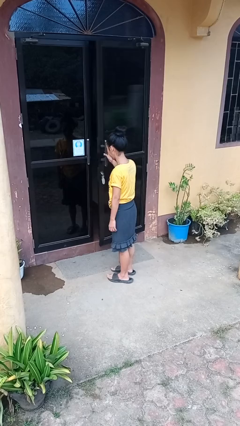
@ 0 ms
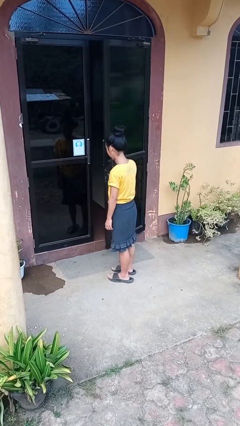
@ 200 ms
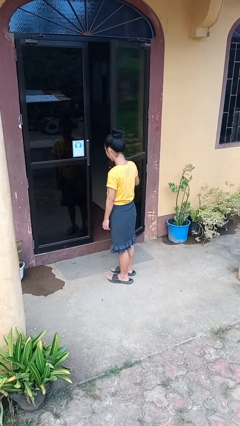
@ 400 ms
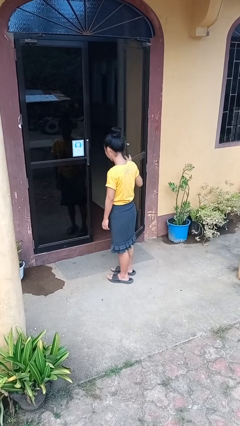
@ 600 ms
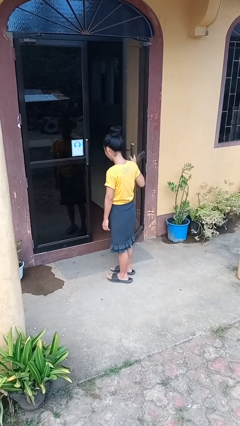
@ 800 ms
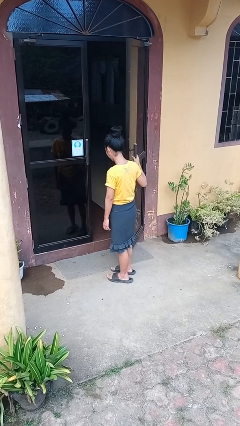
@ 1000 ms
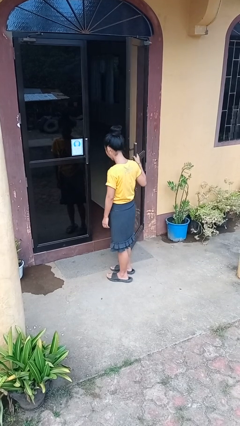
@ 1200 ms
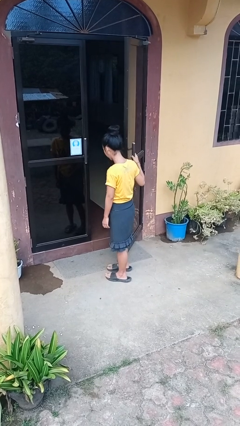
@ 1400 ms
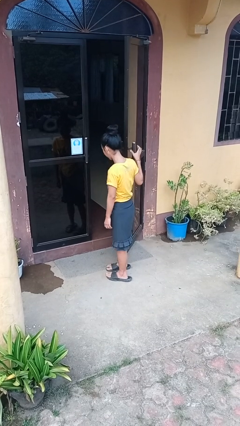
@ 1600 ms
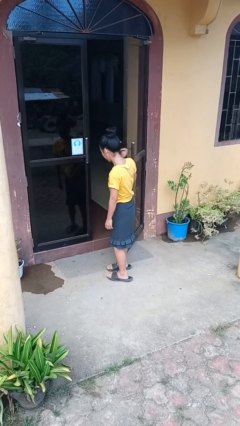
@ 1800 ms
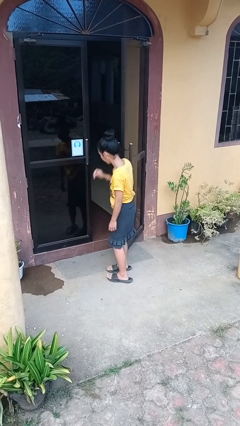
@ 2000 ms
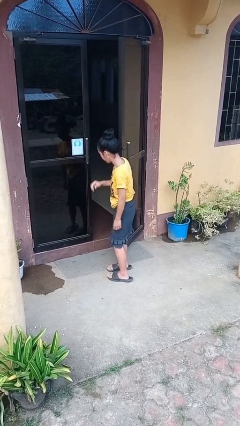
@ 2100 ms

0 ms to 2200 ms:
person opens facility door

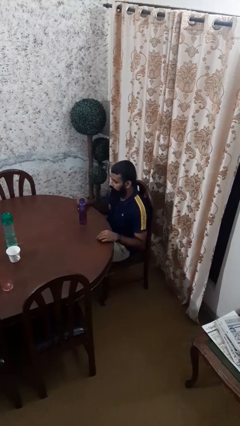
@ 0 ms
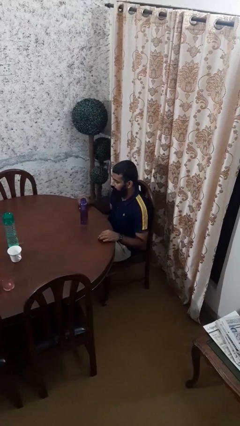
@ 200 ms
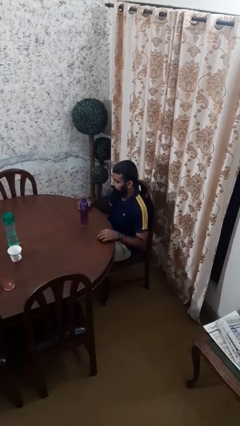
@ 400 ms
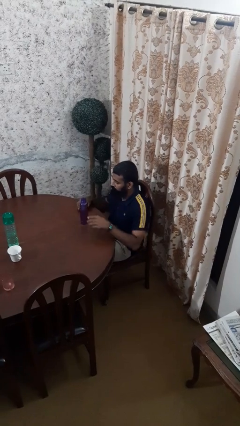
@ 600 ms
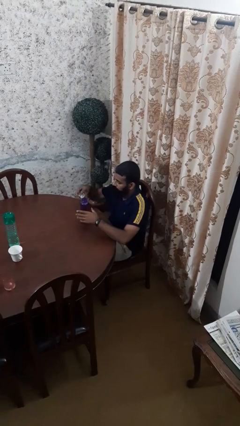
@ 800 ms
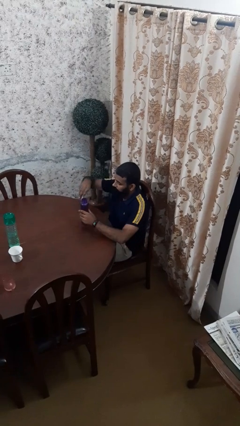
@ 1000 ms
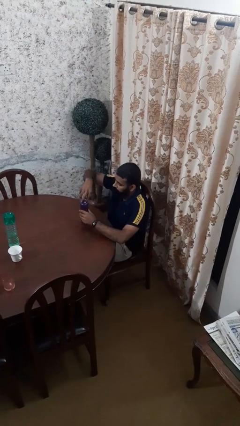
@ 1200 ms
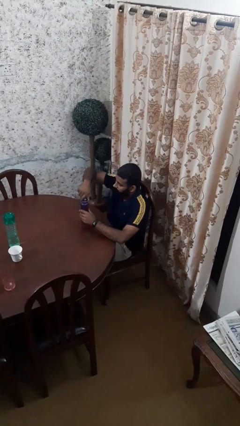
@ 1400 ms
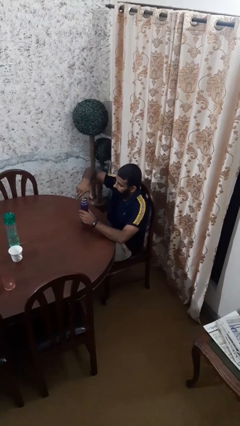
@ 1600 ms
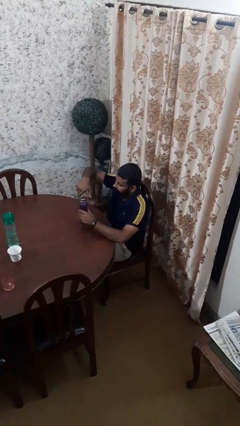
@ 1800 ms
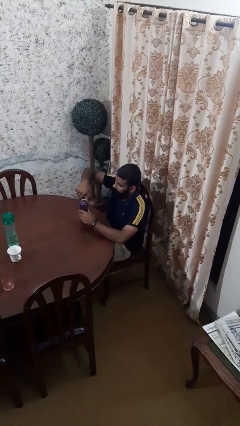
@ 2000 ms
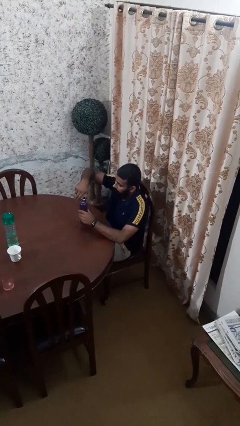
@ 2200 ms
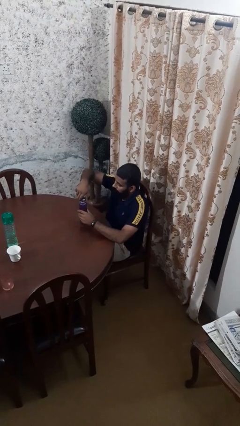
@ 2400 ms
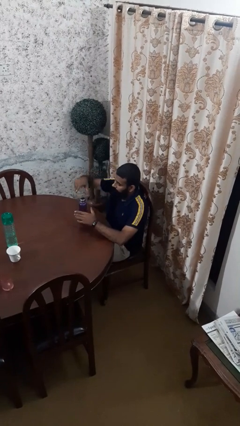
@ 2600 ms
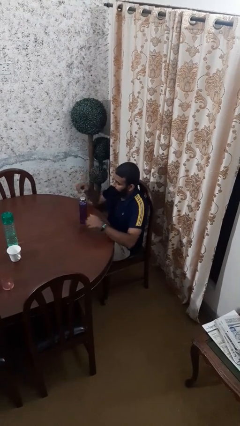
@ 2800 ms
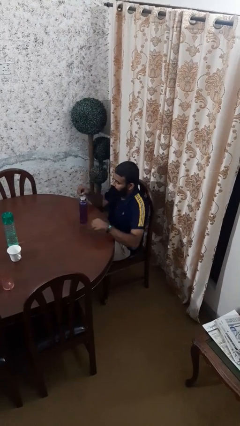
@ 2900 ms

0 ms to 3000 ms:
person screws lid to bottle

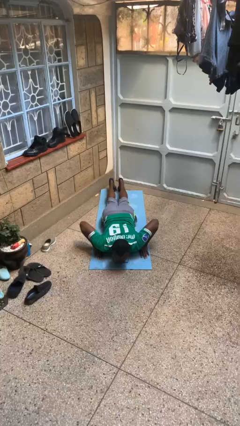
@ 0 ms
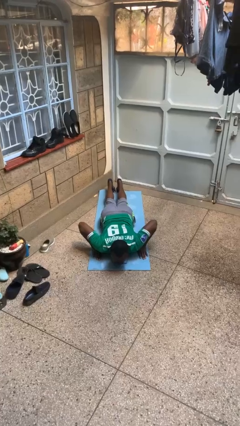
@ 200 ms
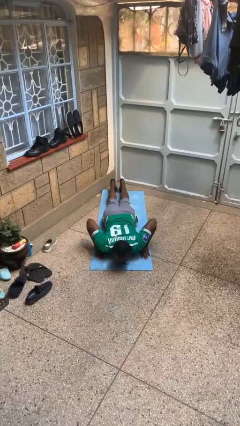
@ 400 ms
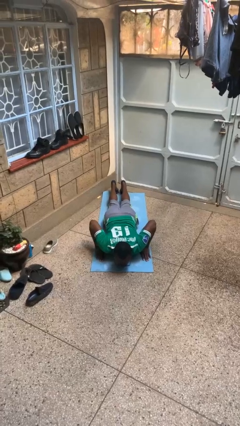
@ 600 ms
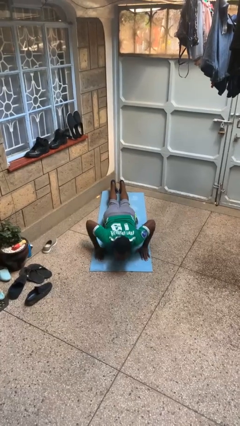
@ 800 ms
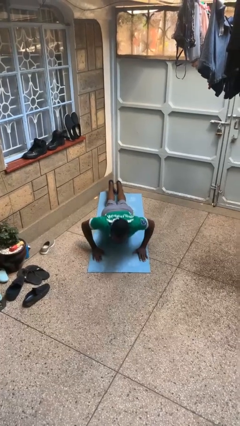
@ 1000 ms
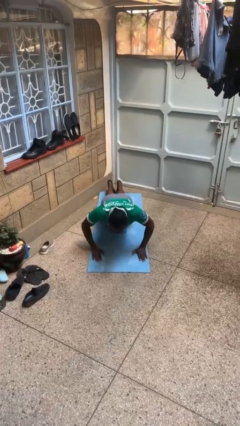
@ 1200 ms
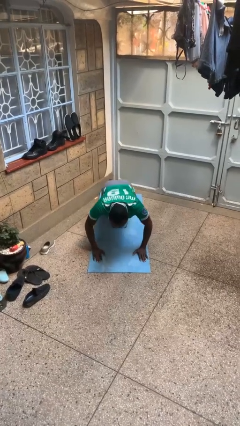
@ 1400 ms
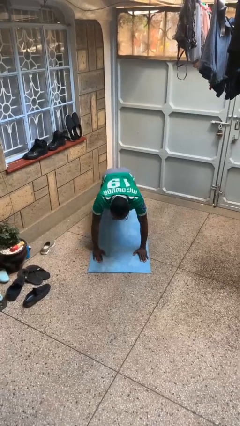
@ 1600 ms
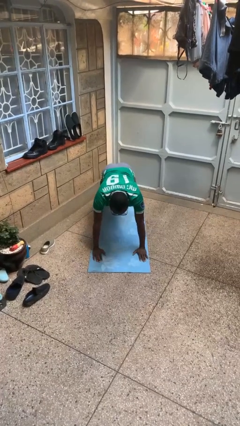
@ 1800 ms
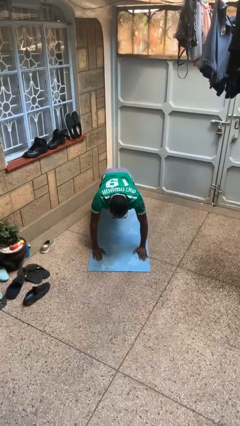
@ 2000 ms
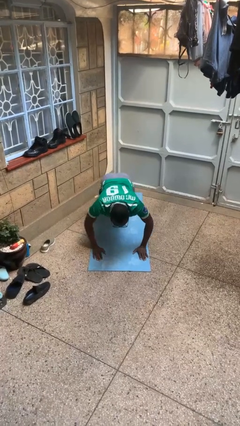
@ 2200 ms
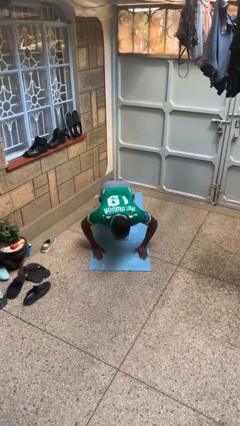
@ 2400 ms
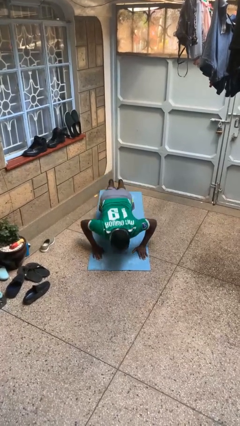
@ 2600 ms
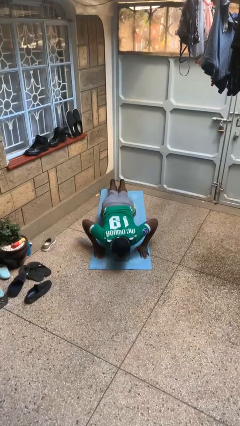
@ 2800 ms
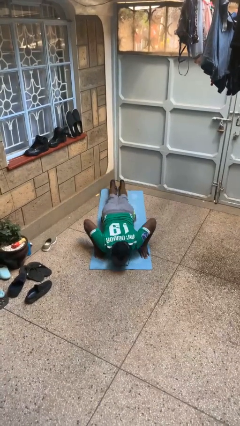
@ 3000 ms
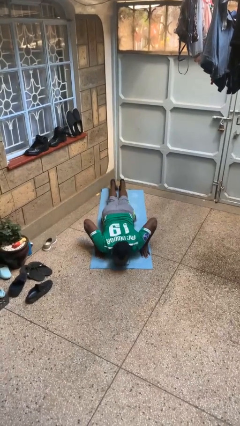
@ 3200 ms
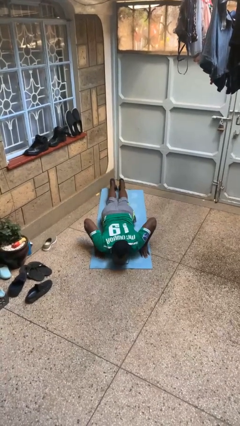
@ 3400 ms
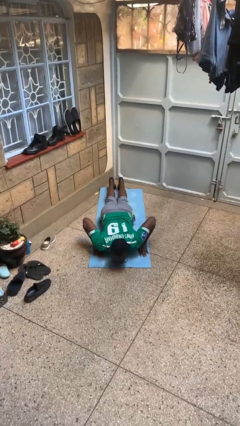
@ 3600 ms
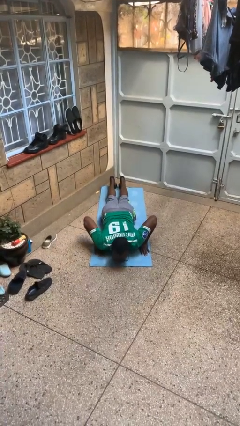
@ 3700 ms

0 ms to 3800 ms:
person exercises with pushup

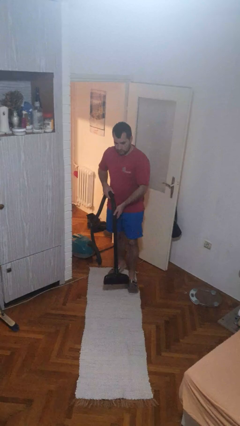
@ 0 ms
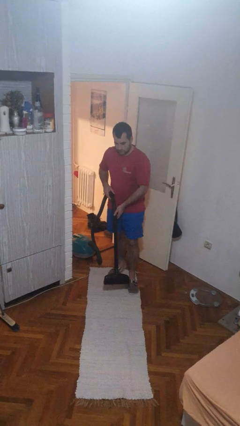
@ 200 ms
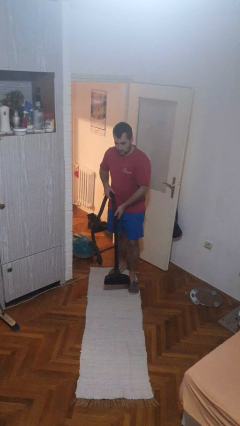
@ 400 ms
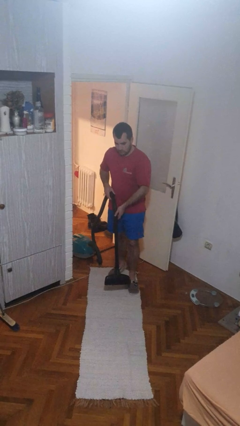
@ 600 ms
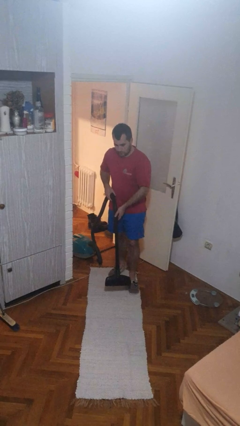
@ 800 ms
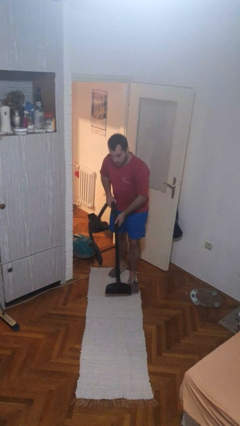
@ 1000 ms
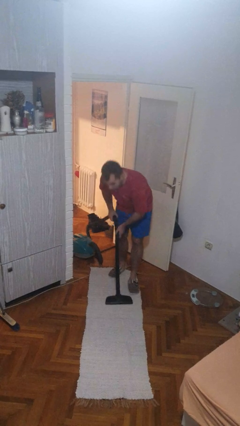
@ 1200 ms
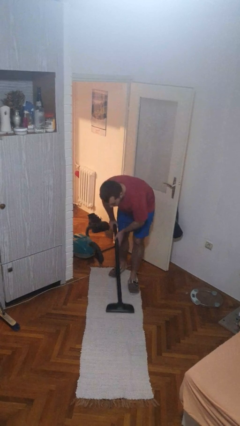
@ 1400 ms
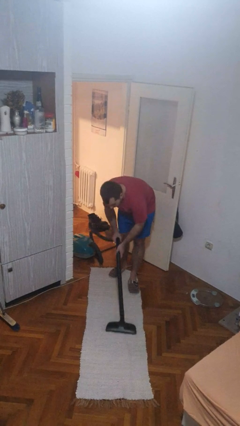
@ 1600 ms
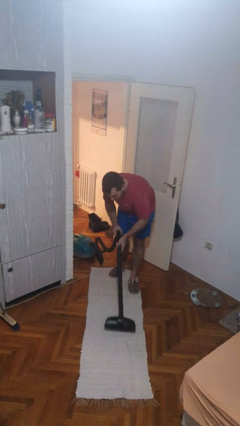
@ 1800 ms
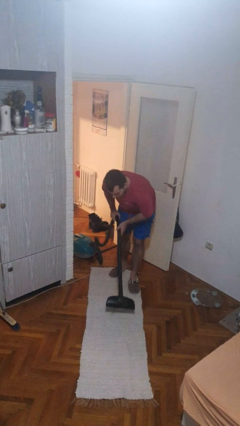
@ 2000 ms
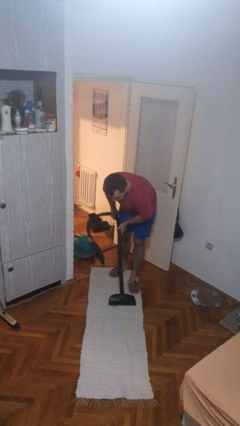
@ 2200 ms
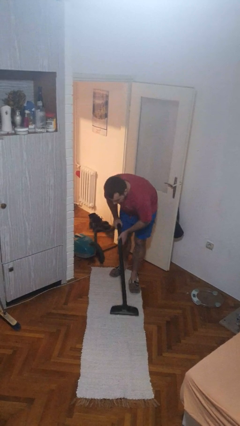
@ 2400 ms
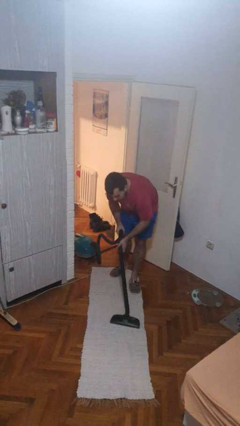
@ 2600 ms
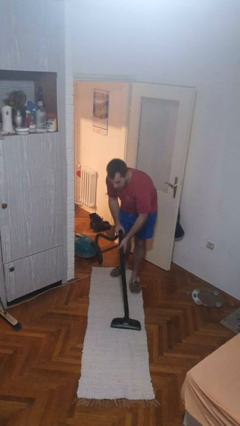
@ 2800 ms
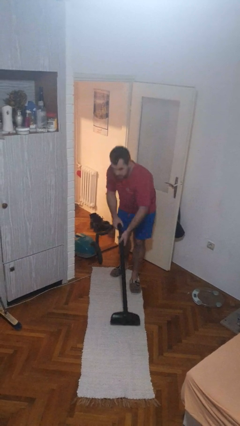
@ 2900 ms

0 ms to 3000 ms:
person vacuums carpet

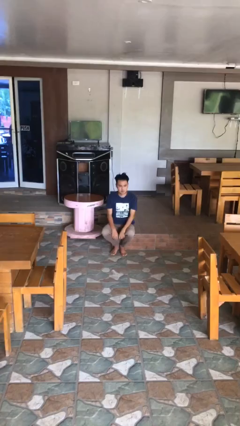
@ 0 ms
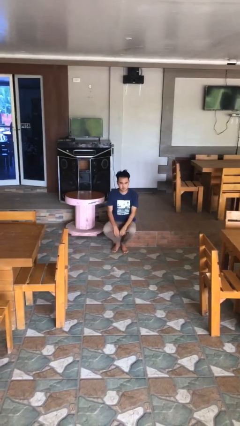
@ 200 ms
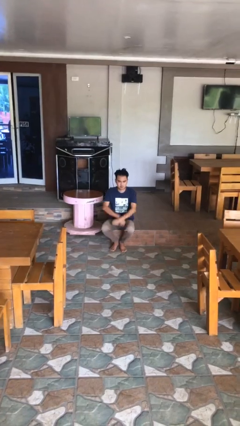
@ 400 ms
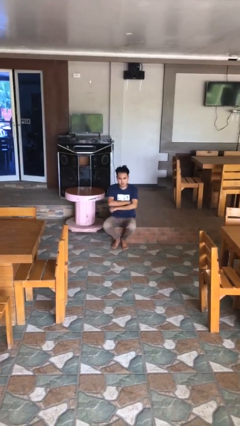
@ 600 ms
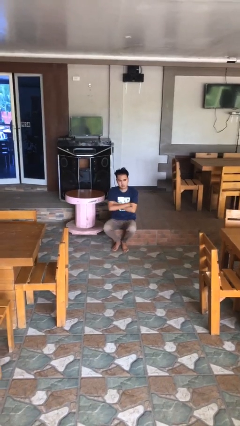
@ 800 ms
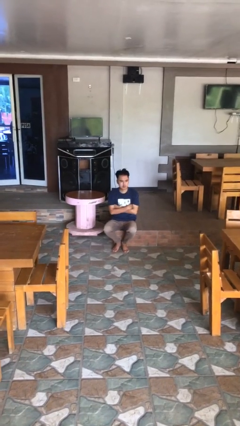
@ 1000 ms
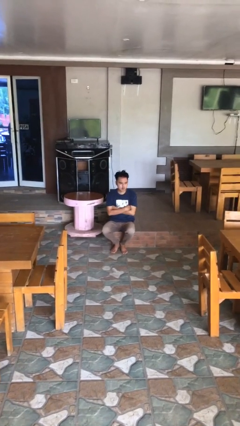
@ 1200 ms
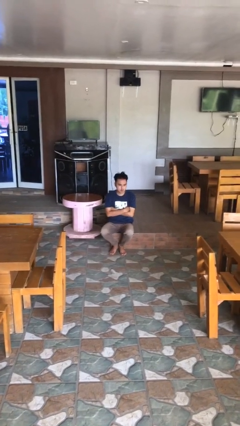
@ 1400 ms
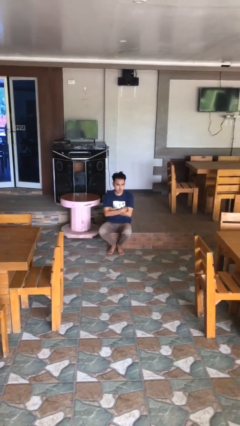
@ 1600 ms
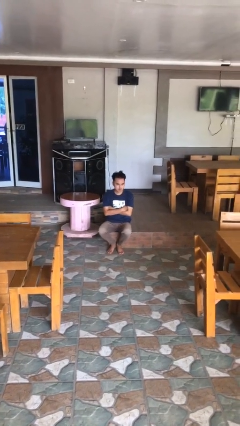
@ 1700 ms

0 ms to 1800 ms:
person crosses arms

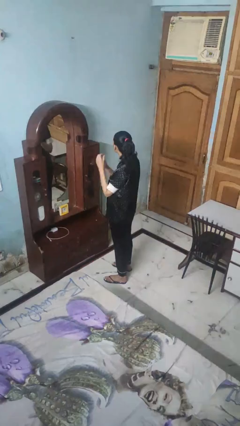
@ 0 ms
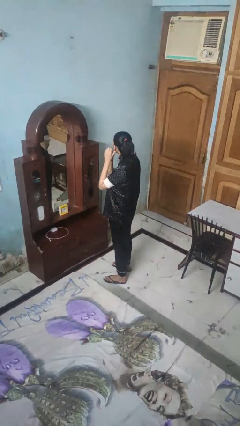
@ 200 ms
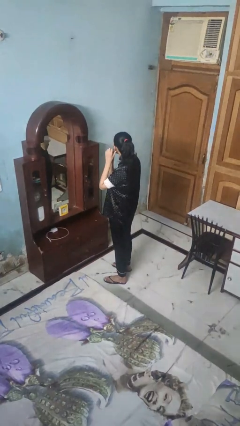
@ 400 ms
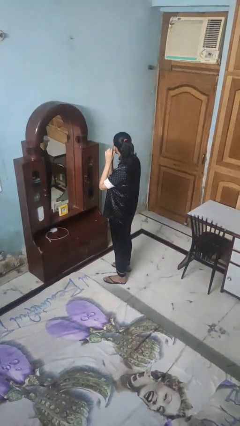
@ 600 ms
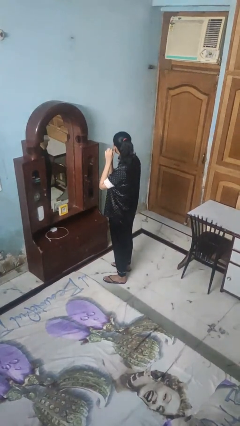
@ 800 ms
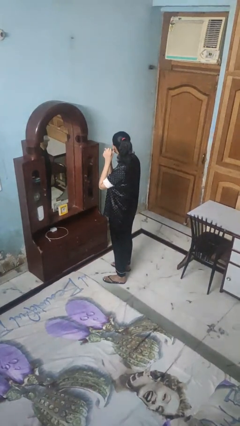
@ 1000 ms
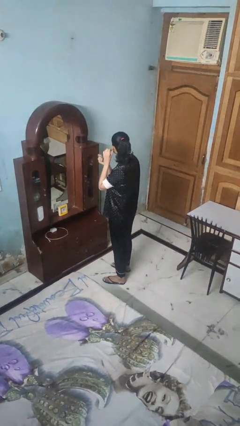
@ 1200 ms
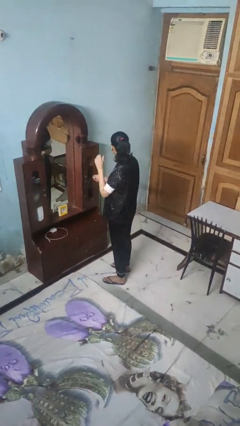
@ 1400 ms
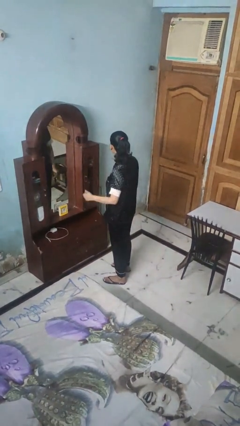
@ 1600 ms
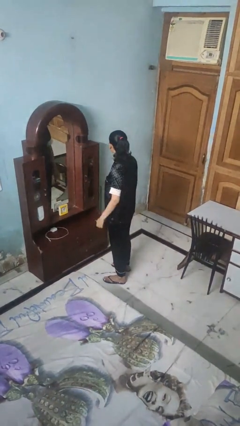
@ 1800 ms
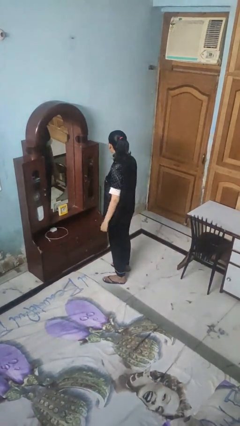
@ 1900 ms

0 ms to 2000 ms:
person takes off earrings

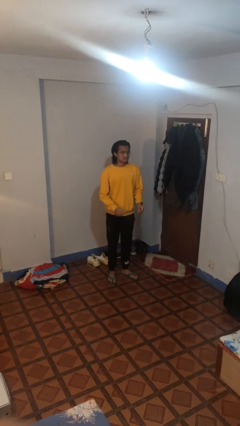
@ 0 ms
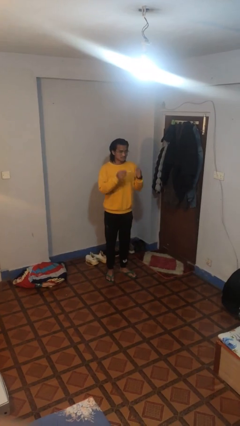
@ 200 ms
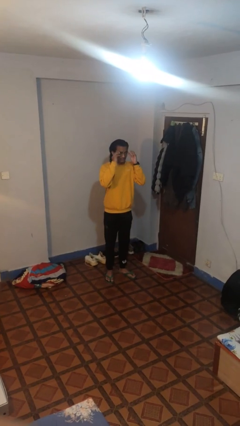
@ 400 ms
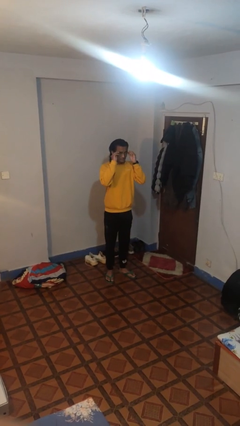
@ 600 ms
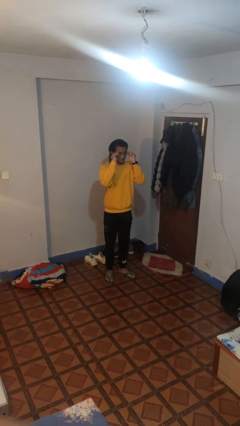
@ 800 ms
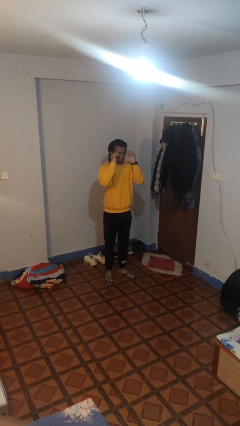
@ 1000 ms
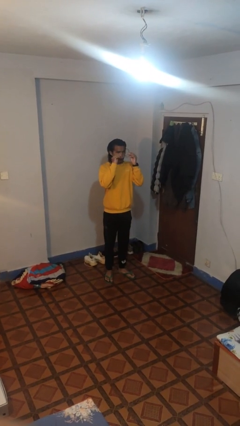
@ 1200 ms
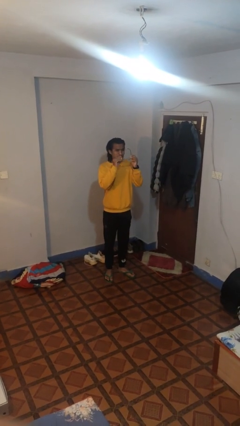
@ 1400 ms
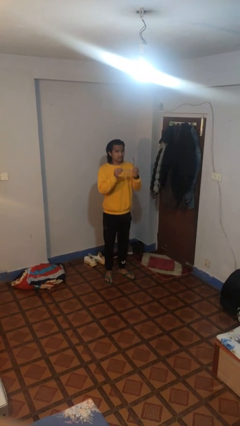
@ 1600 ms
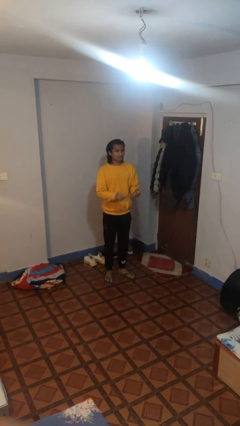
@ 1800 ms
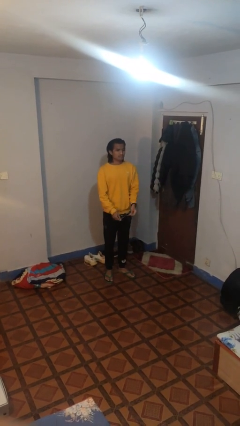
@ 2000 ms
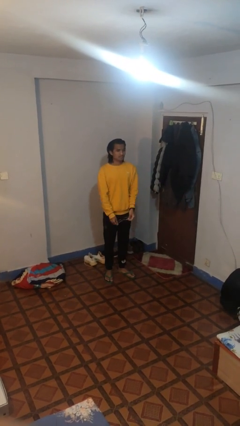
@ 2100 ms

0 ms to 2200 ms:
person takes off glasses
